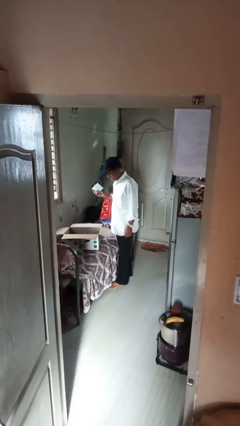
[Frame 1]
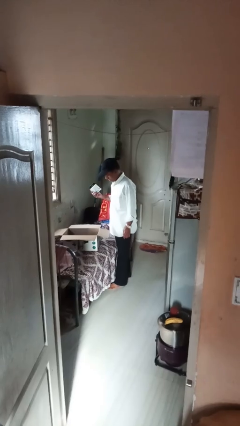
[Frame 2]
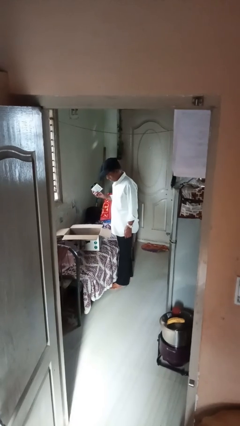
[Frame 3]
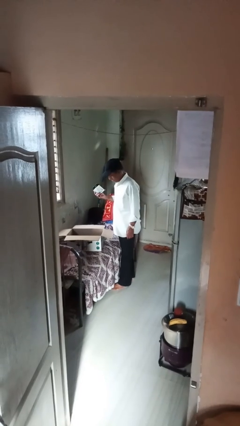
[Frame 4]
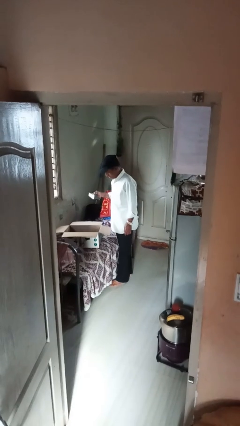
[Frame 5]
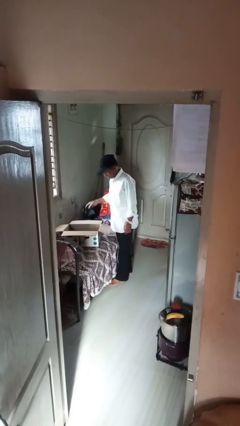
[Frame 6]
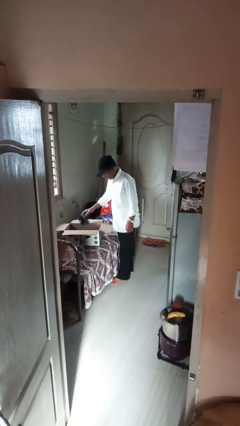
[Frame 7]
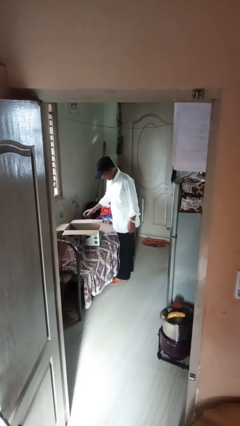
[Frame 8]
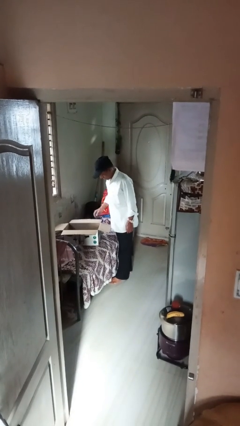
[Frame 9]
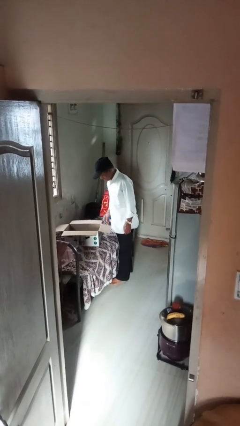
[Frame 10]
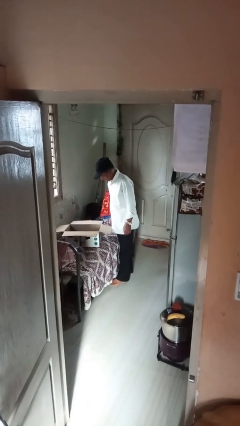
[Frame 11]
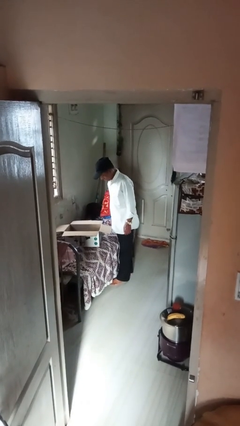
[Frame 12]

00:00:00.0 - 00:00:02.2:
person puts object into box

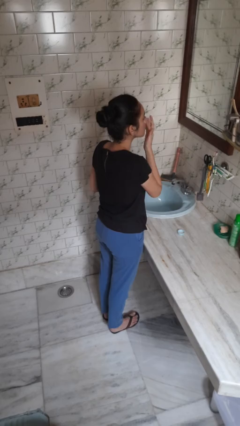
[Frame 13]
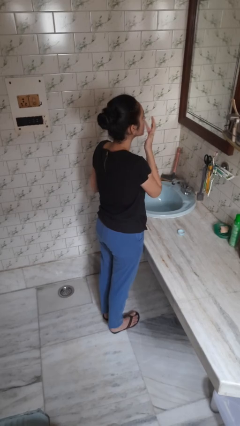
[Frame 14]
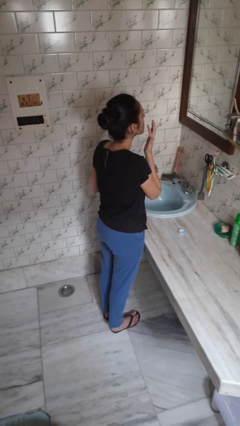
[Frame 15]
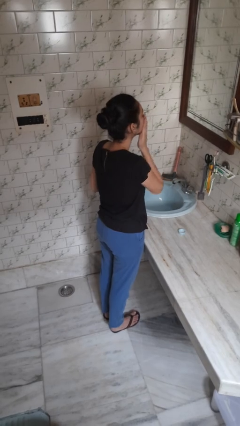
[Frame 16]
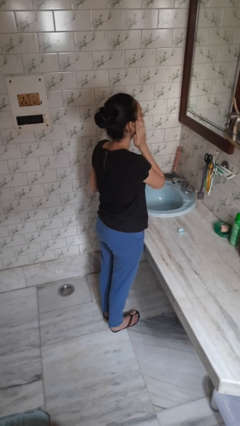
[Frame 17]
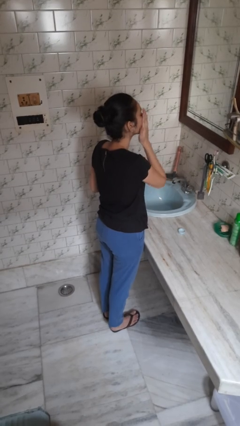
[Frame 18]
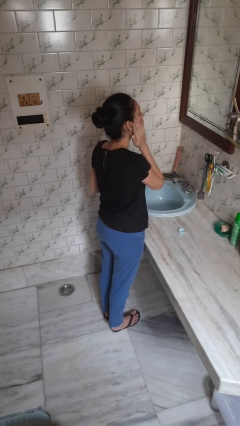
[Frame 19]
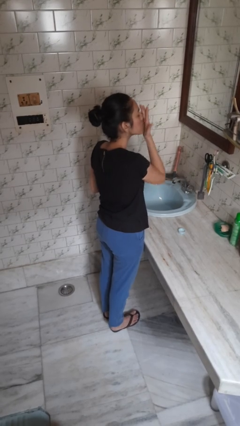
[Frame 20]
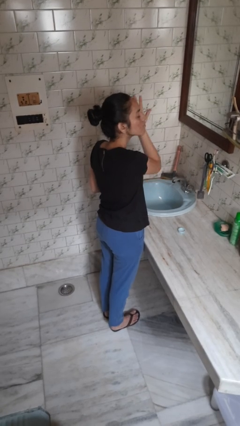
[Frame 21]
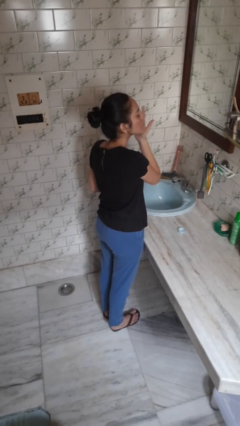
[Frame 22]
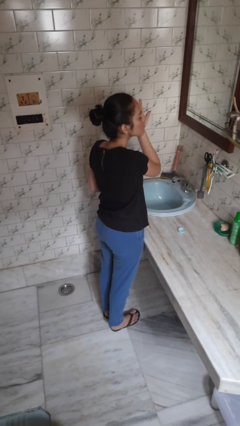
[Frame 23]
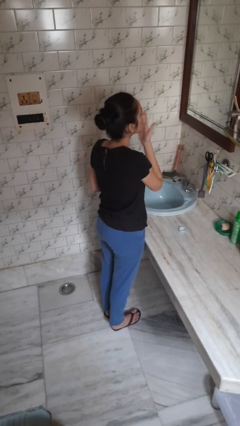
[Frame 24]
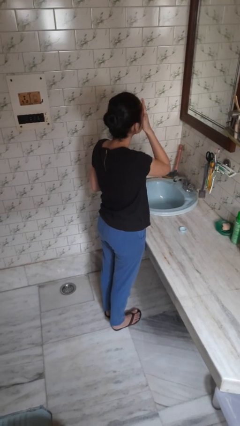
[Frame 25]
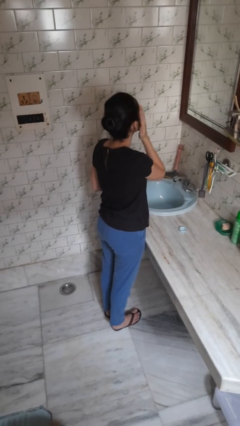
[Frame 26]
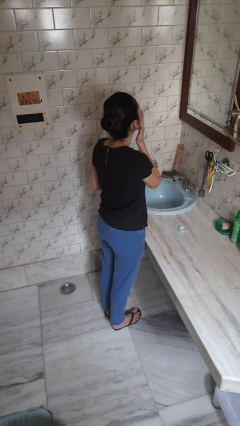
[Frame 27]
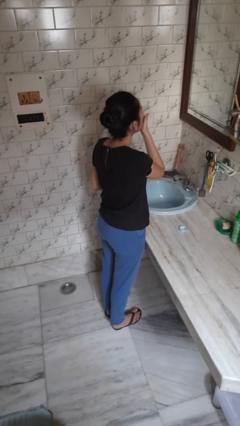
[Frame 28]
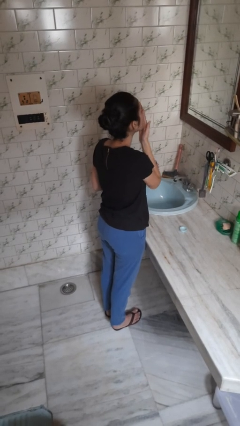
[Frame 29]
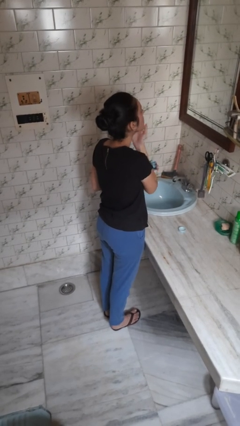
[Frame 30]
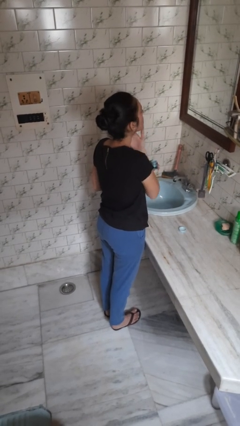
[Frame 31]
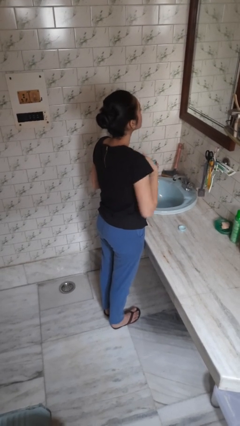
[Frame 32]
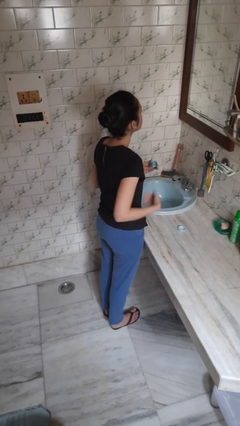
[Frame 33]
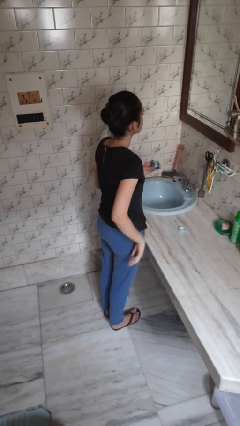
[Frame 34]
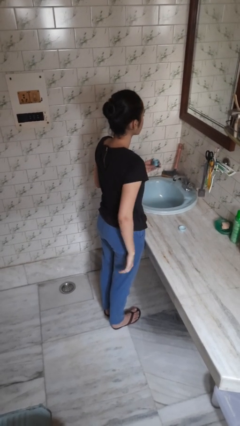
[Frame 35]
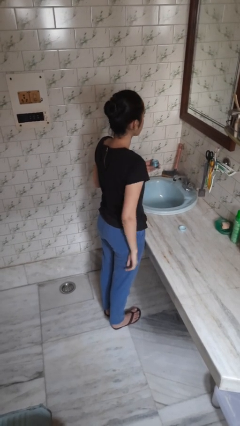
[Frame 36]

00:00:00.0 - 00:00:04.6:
person applies facial moisturizer

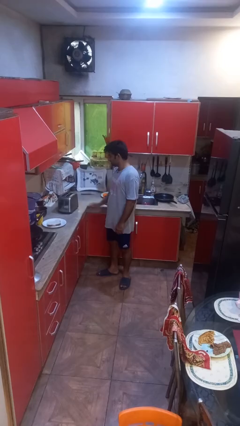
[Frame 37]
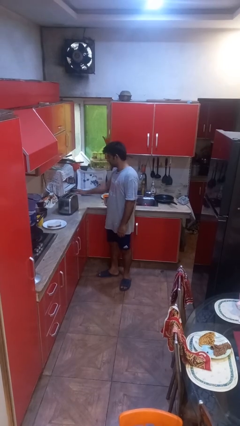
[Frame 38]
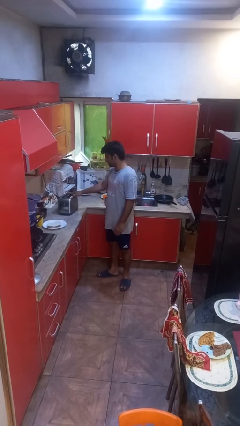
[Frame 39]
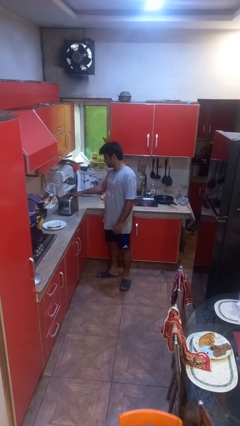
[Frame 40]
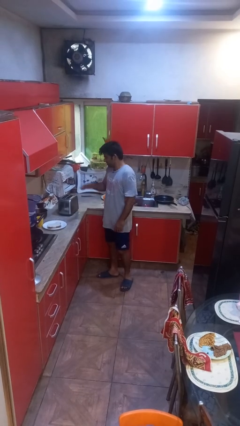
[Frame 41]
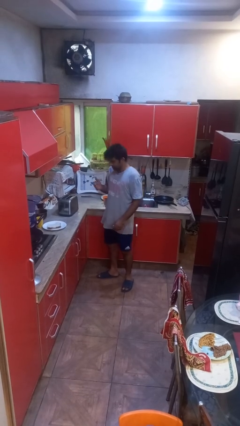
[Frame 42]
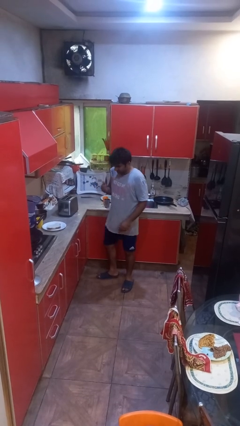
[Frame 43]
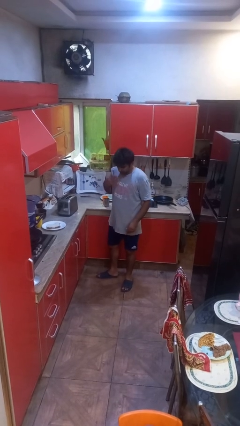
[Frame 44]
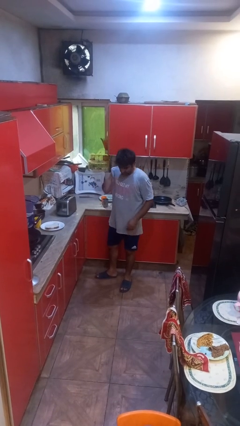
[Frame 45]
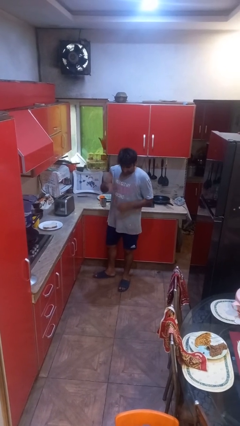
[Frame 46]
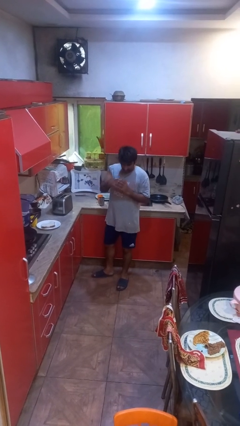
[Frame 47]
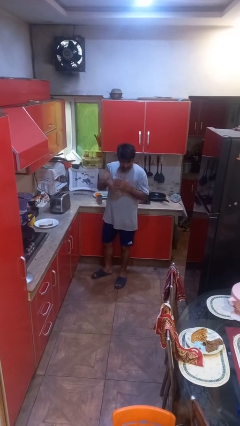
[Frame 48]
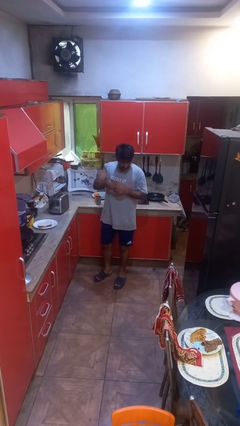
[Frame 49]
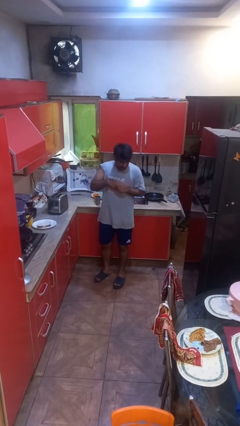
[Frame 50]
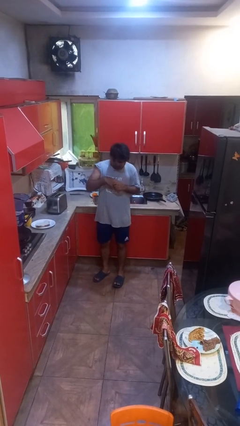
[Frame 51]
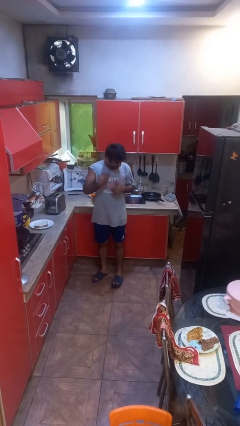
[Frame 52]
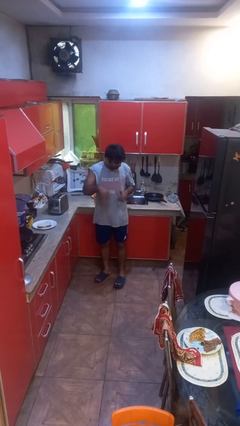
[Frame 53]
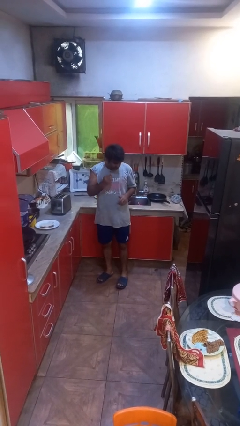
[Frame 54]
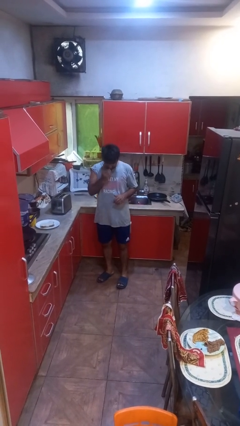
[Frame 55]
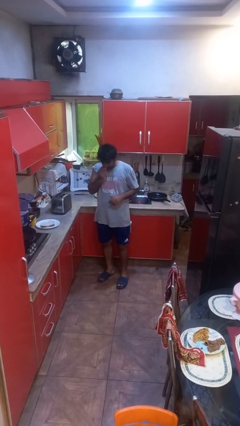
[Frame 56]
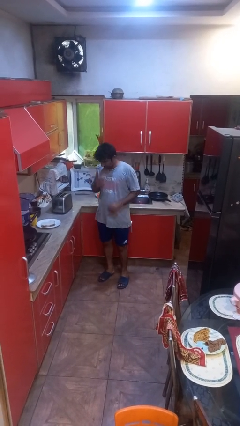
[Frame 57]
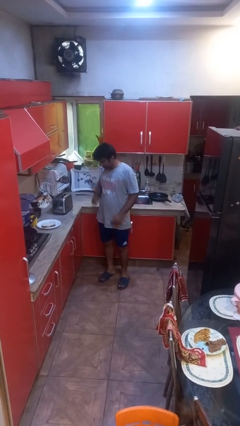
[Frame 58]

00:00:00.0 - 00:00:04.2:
person burns hand

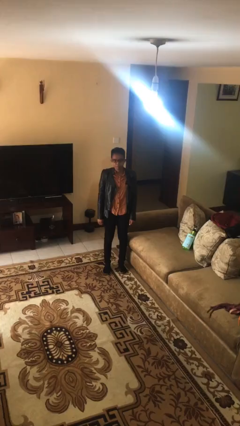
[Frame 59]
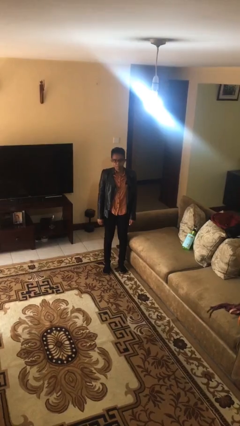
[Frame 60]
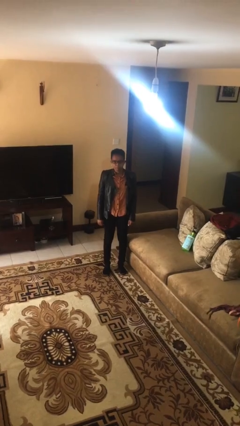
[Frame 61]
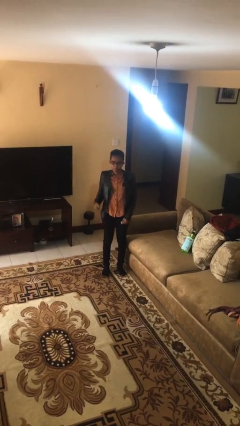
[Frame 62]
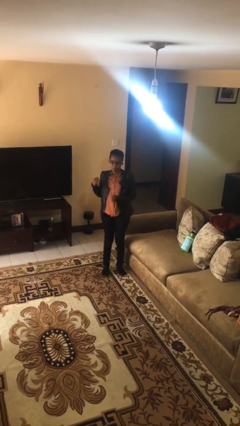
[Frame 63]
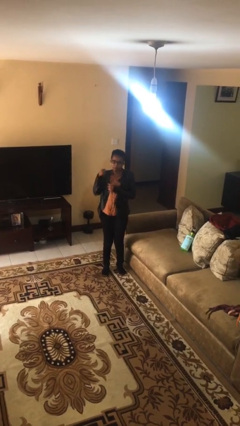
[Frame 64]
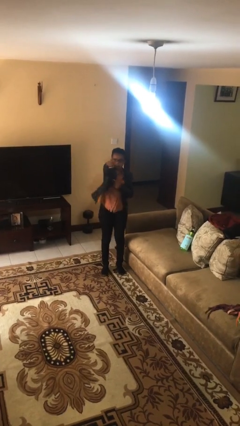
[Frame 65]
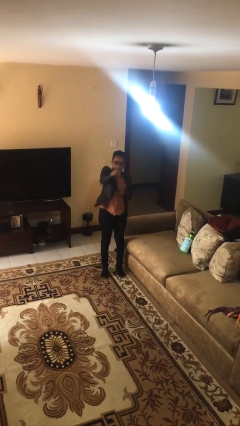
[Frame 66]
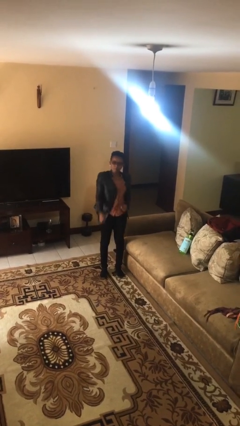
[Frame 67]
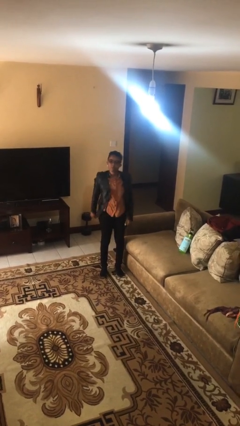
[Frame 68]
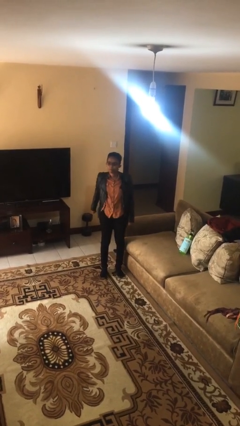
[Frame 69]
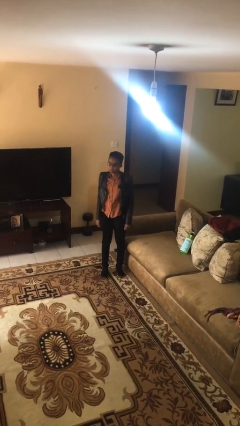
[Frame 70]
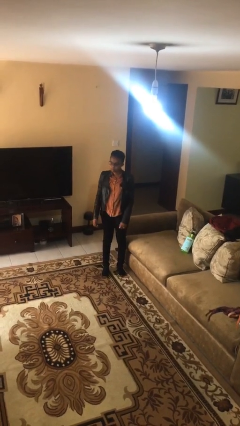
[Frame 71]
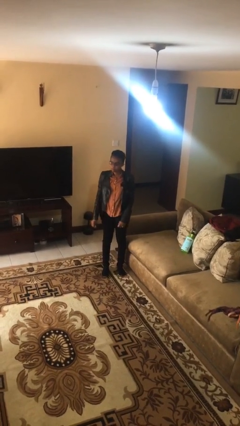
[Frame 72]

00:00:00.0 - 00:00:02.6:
person punches

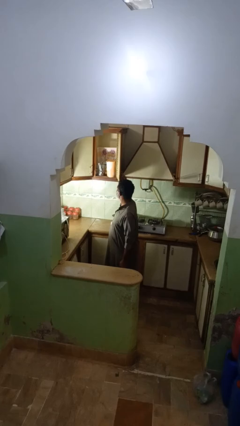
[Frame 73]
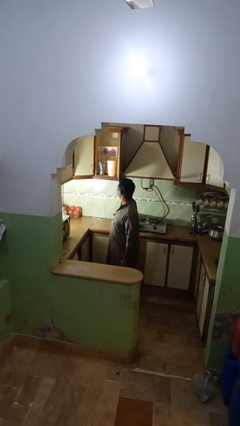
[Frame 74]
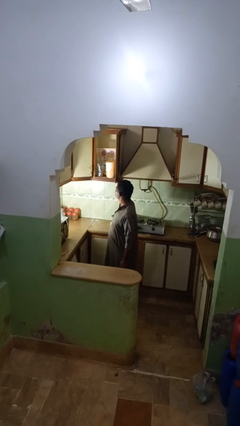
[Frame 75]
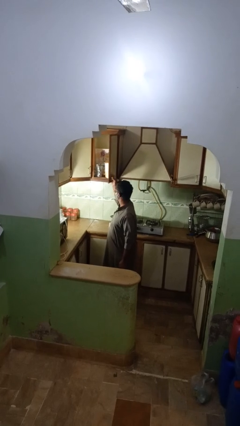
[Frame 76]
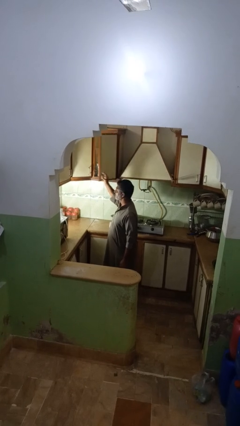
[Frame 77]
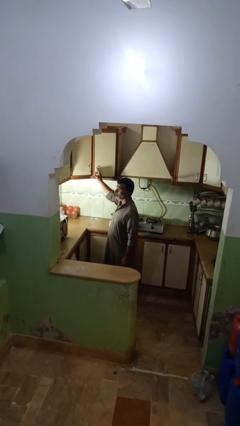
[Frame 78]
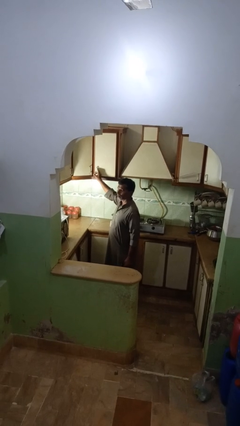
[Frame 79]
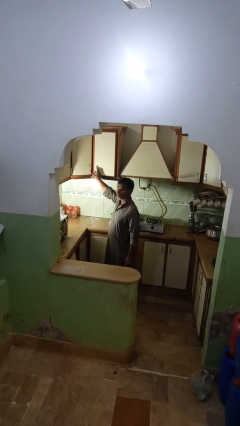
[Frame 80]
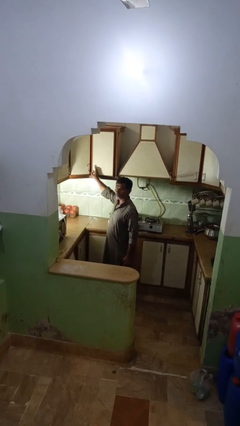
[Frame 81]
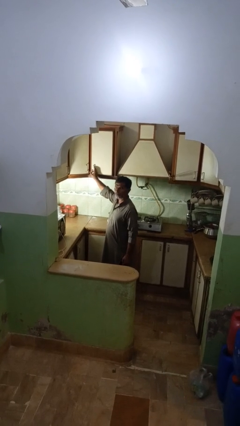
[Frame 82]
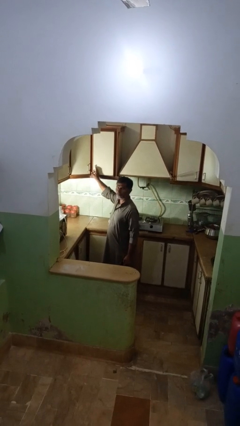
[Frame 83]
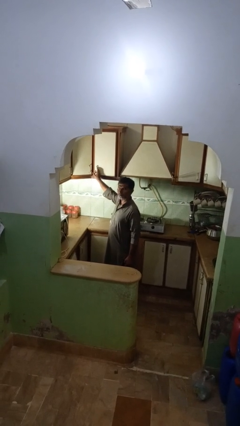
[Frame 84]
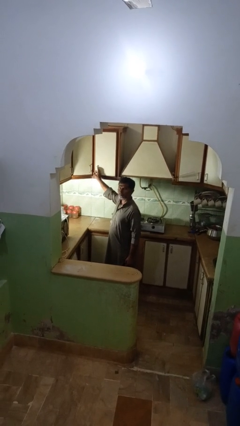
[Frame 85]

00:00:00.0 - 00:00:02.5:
person closes kitchen drawer

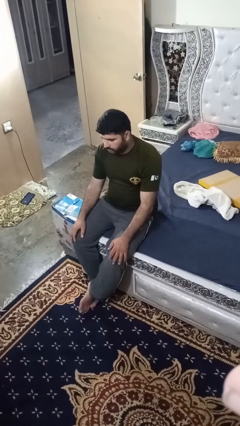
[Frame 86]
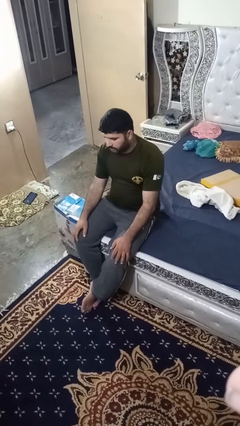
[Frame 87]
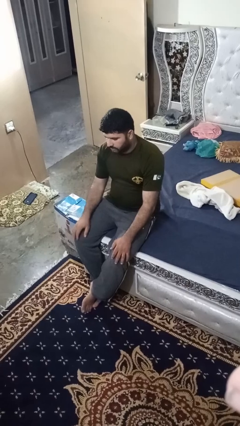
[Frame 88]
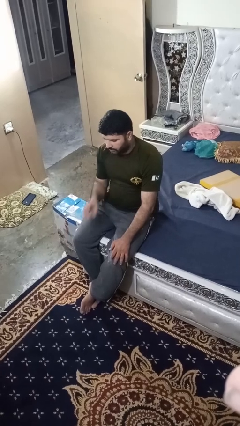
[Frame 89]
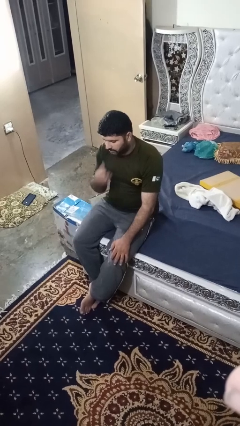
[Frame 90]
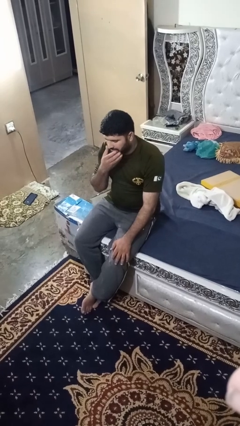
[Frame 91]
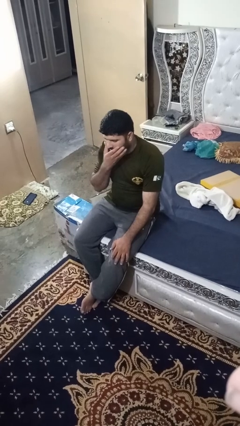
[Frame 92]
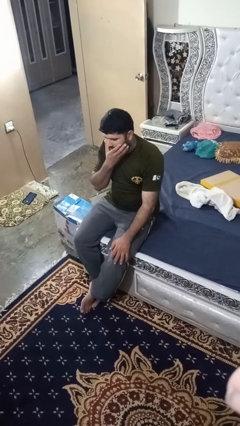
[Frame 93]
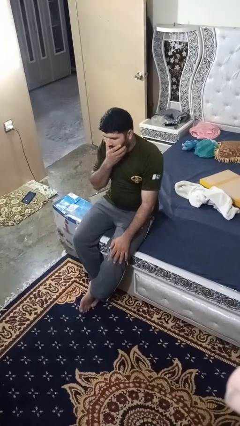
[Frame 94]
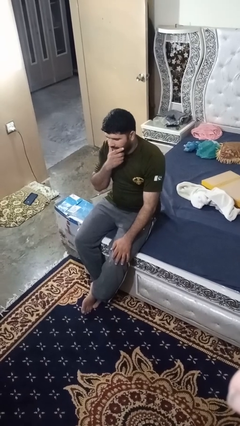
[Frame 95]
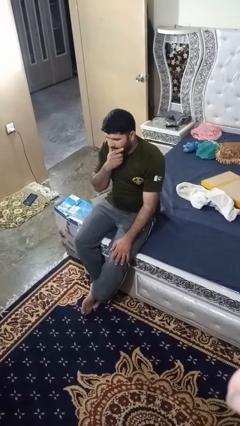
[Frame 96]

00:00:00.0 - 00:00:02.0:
person strokes chin
